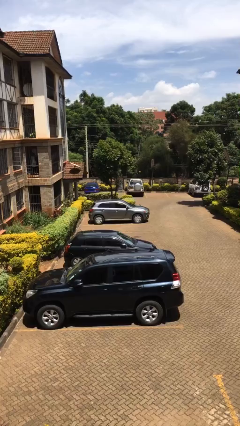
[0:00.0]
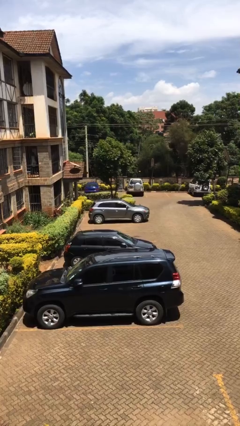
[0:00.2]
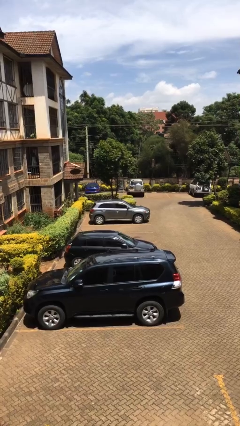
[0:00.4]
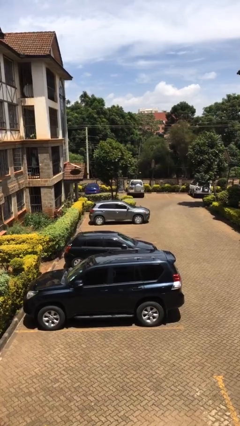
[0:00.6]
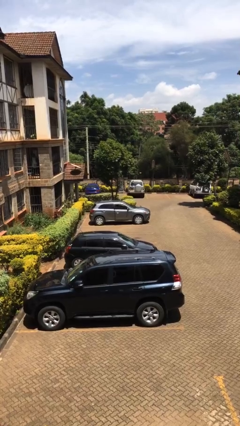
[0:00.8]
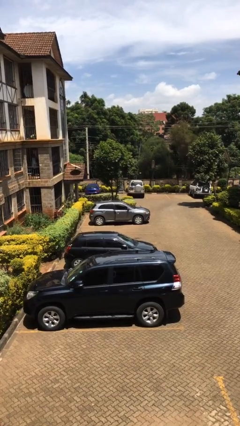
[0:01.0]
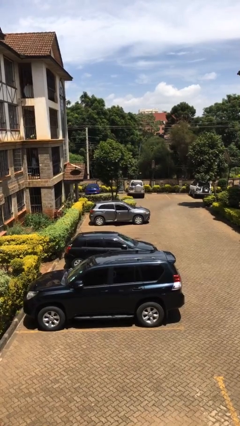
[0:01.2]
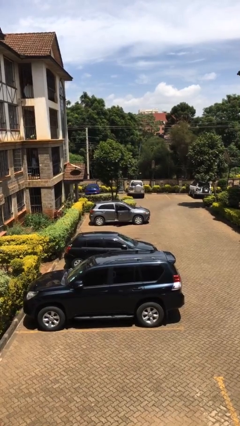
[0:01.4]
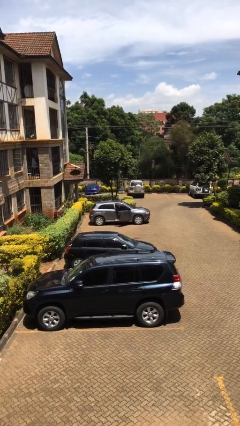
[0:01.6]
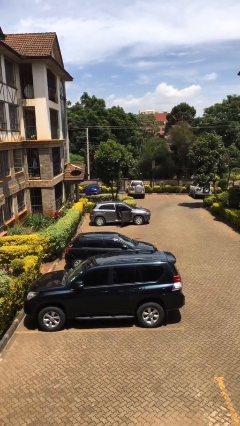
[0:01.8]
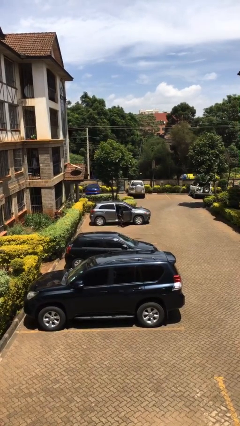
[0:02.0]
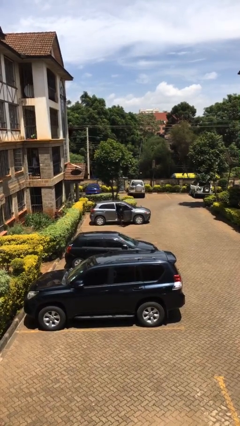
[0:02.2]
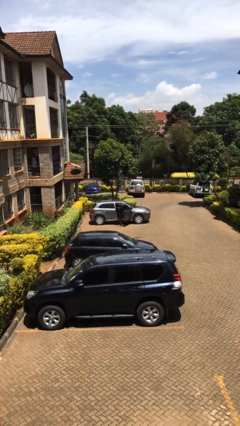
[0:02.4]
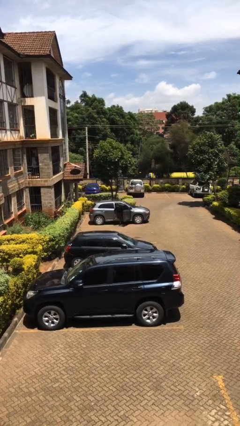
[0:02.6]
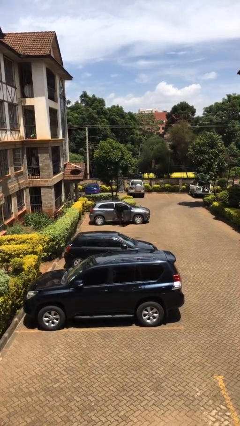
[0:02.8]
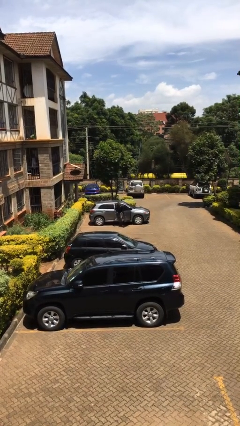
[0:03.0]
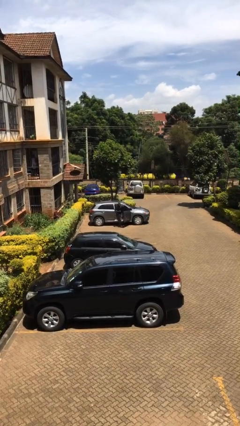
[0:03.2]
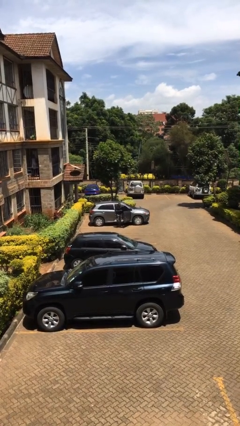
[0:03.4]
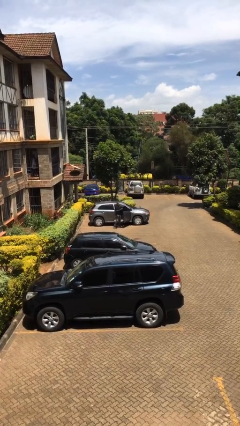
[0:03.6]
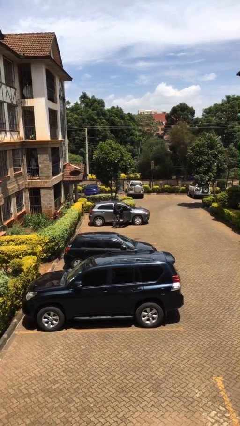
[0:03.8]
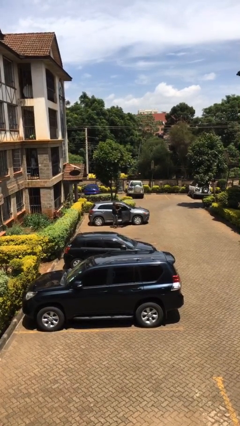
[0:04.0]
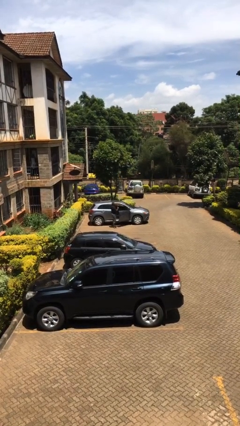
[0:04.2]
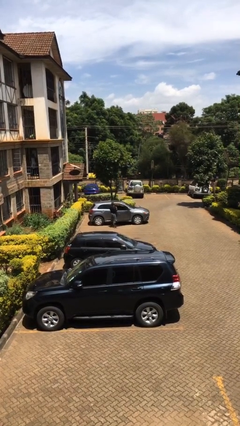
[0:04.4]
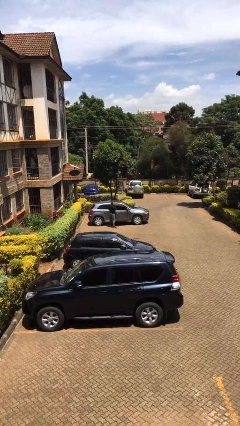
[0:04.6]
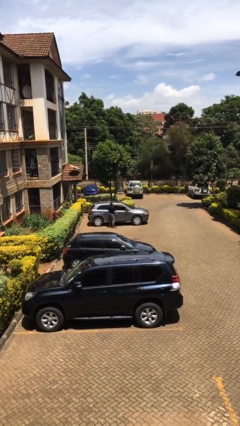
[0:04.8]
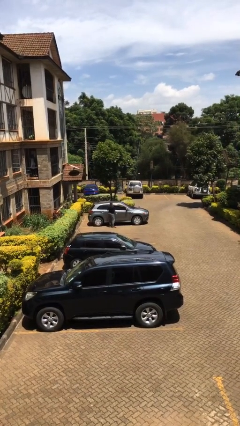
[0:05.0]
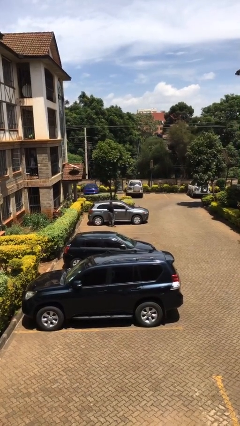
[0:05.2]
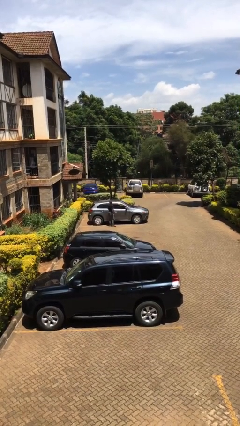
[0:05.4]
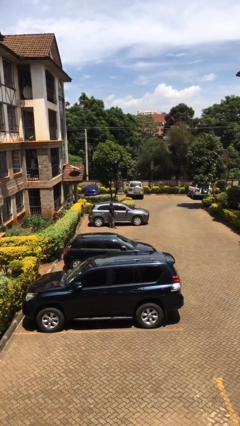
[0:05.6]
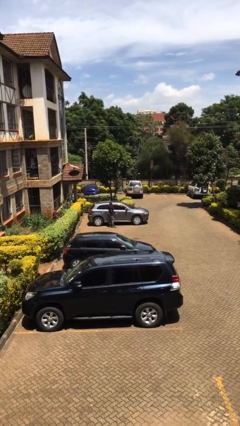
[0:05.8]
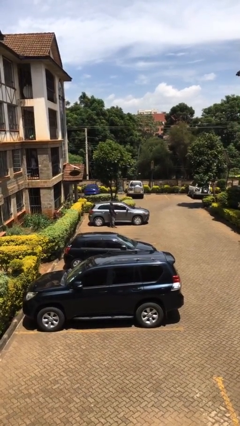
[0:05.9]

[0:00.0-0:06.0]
car drops off person

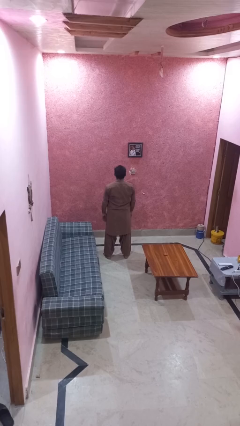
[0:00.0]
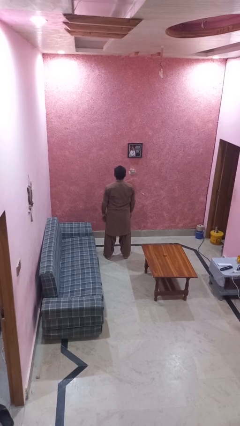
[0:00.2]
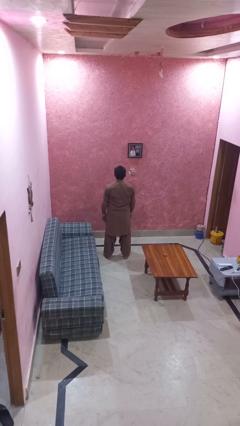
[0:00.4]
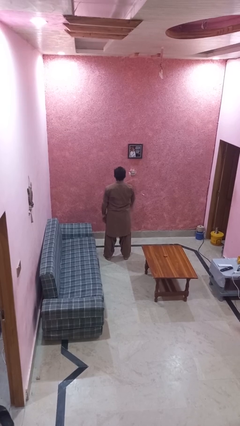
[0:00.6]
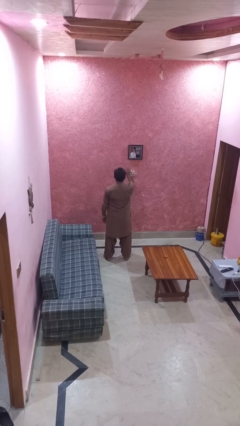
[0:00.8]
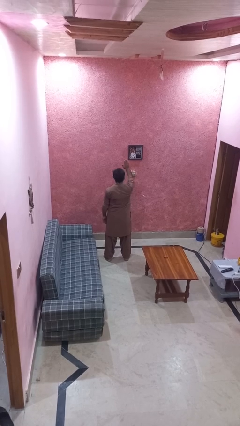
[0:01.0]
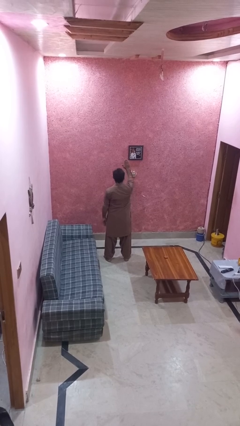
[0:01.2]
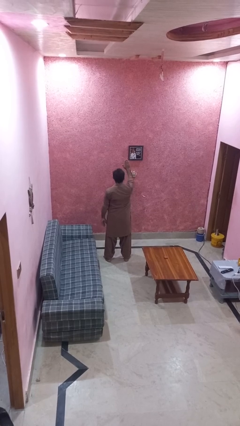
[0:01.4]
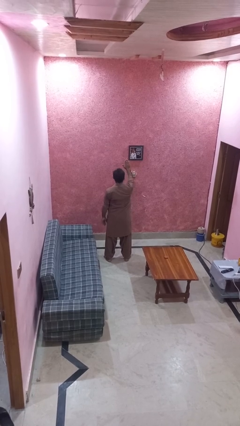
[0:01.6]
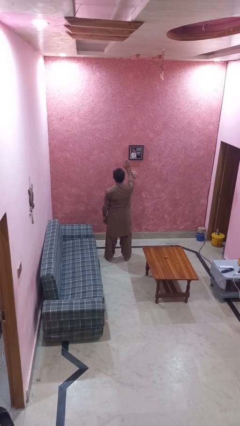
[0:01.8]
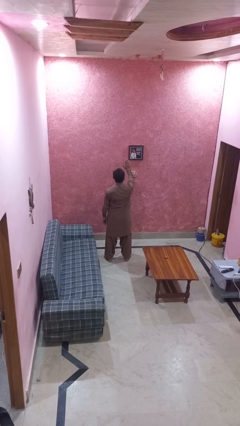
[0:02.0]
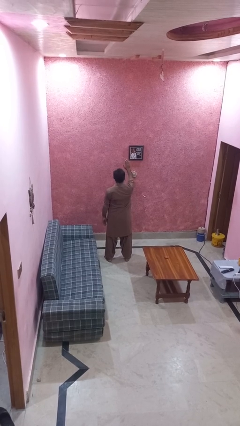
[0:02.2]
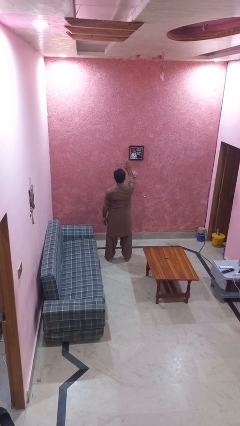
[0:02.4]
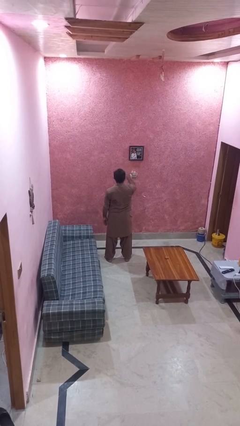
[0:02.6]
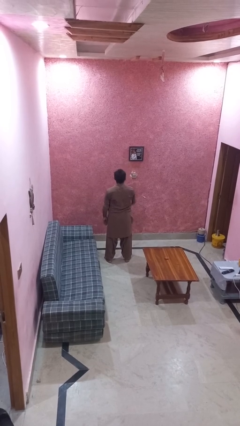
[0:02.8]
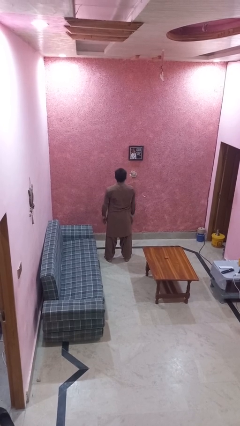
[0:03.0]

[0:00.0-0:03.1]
person gestures stop

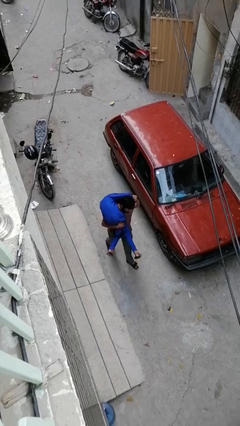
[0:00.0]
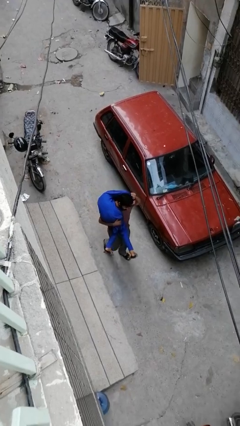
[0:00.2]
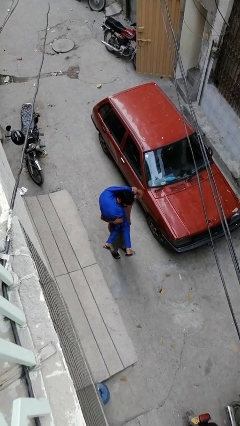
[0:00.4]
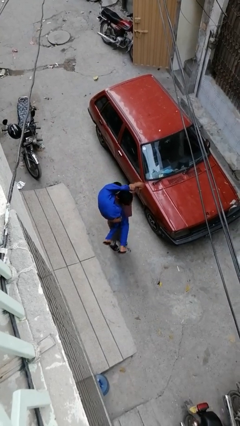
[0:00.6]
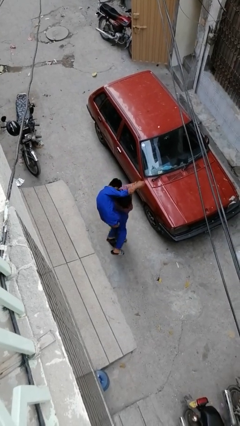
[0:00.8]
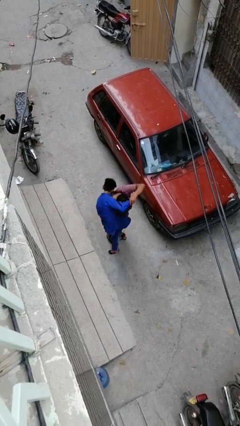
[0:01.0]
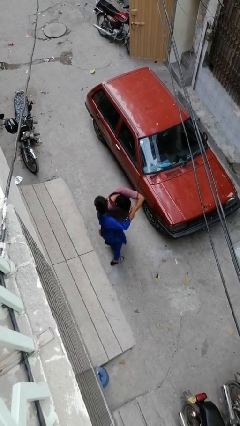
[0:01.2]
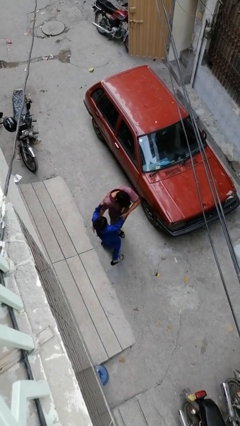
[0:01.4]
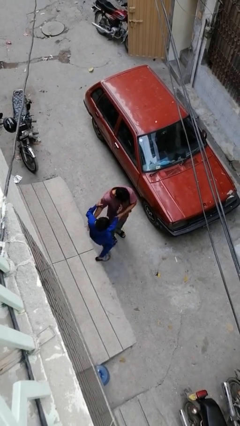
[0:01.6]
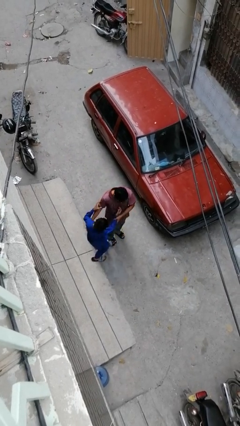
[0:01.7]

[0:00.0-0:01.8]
person puts down person

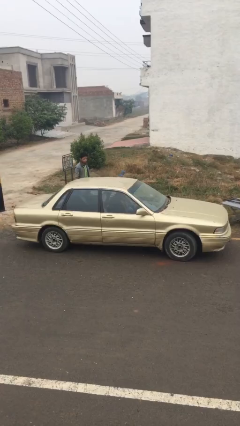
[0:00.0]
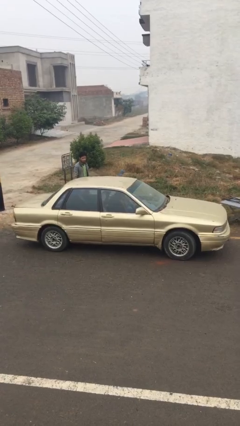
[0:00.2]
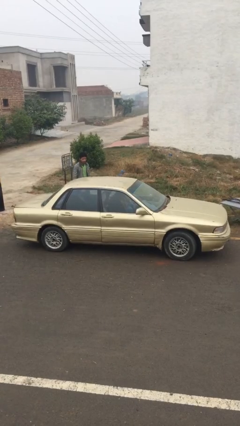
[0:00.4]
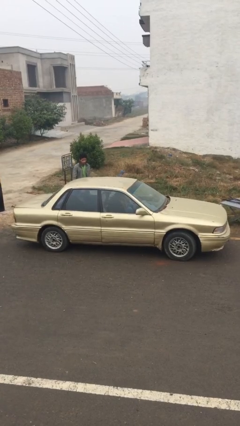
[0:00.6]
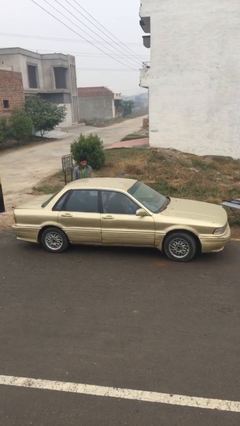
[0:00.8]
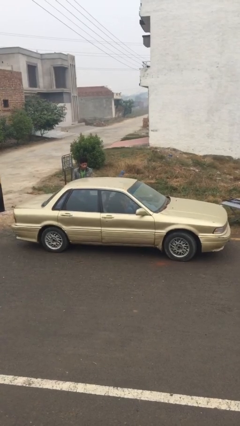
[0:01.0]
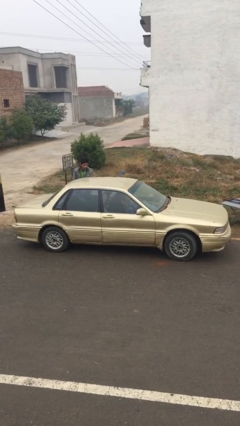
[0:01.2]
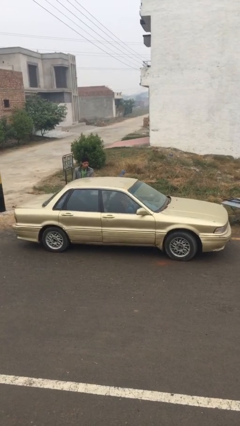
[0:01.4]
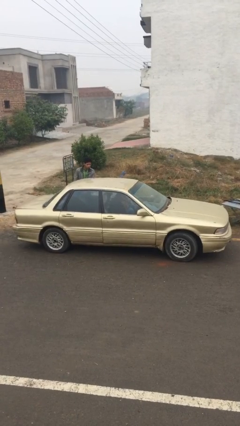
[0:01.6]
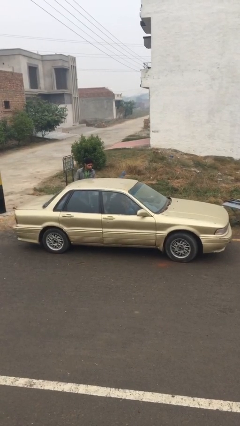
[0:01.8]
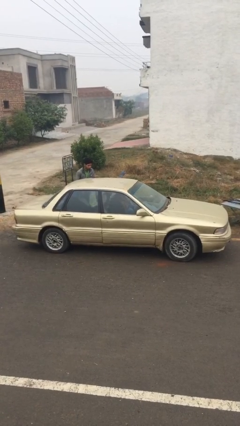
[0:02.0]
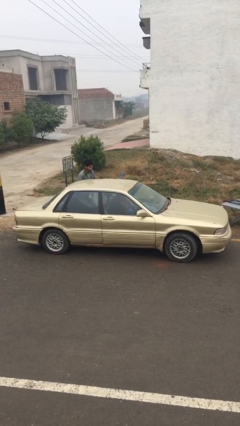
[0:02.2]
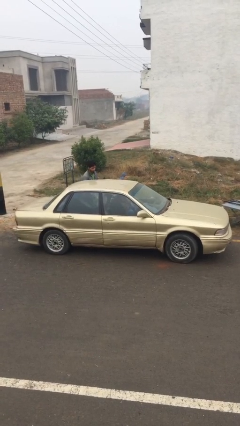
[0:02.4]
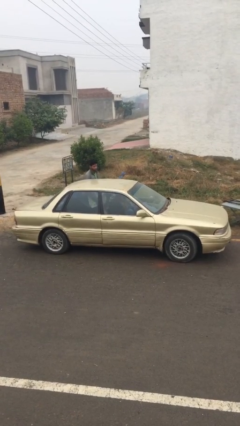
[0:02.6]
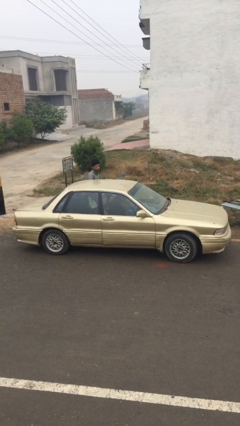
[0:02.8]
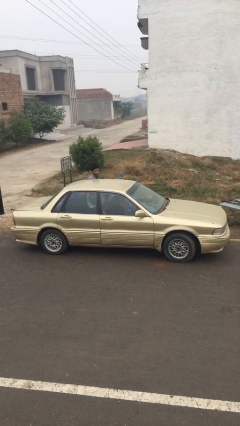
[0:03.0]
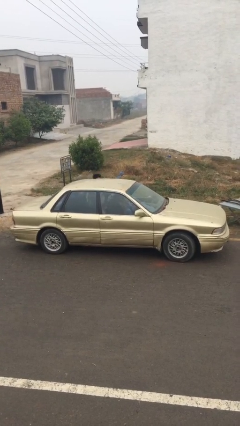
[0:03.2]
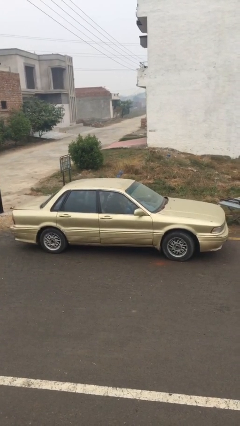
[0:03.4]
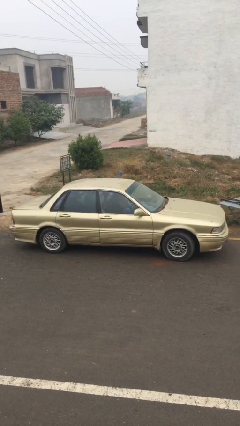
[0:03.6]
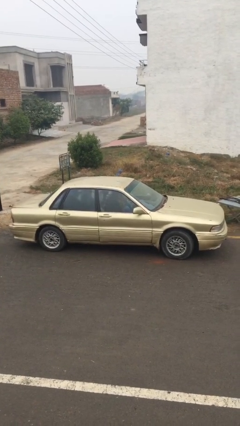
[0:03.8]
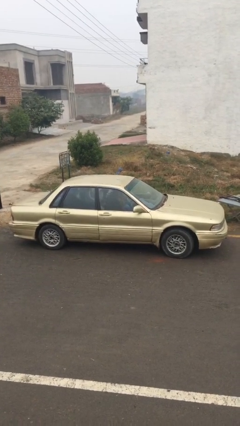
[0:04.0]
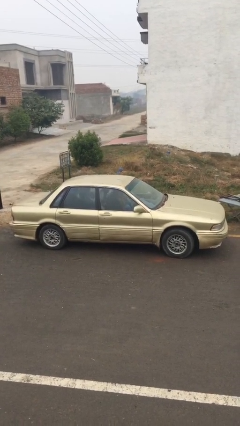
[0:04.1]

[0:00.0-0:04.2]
car picks up person

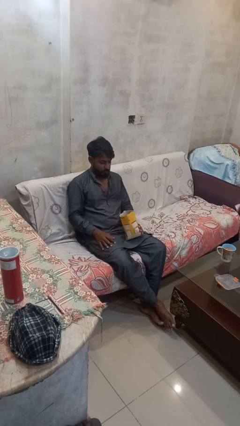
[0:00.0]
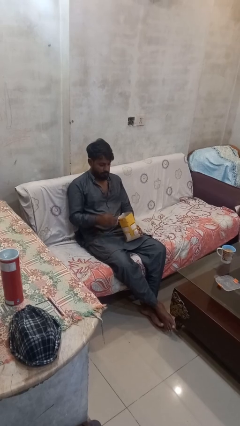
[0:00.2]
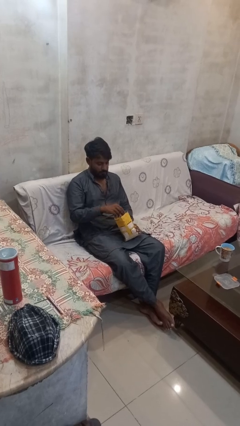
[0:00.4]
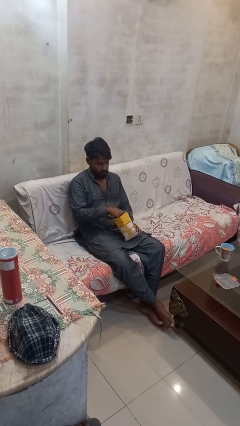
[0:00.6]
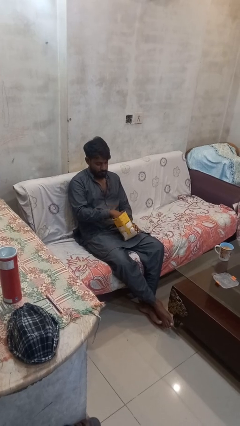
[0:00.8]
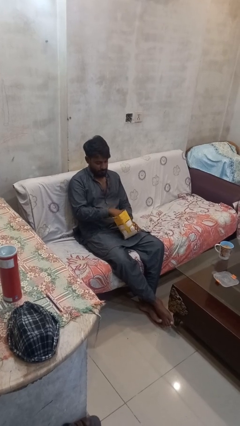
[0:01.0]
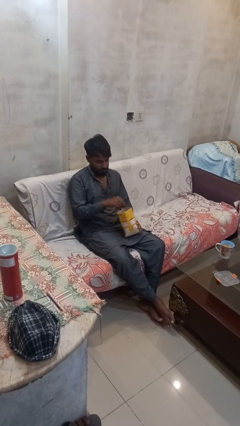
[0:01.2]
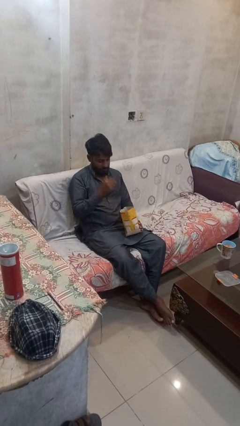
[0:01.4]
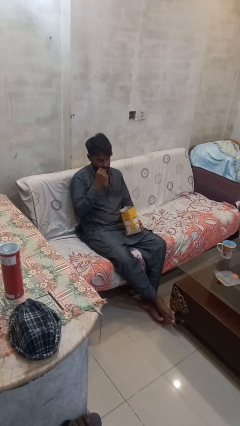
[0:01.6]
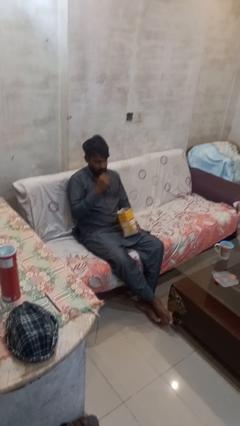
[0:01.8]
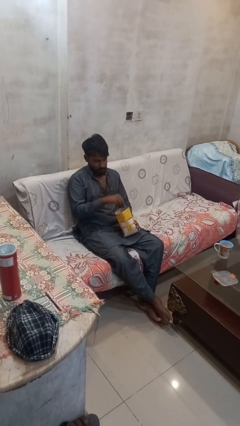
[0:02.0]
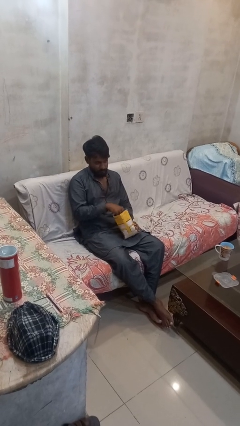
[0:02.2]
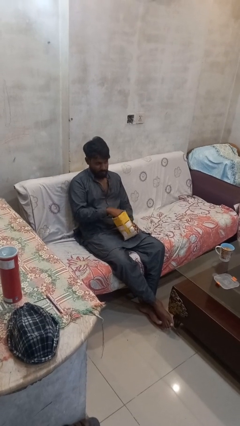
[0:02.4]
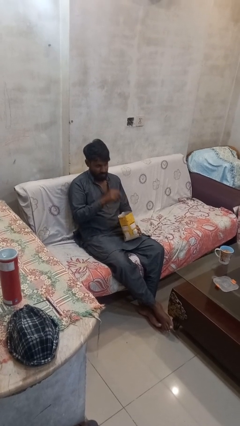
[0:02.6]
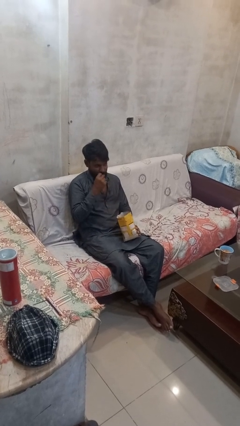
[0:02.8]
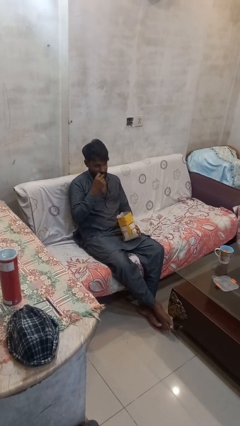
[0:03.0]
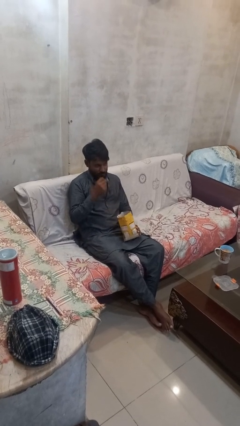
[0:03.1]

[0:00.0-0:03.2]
person eats snack from bag
